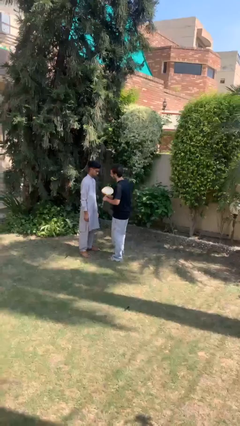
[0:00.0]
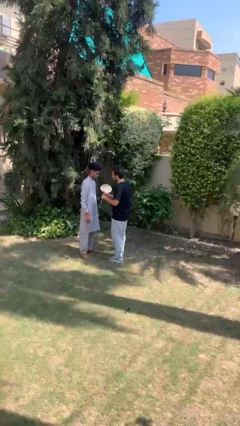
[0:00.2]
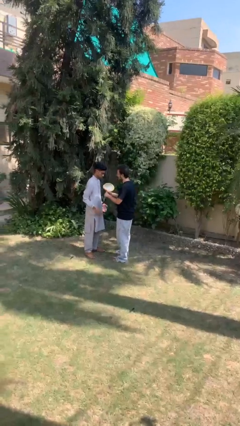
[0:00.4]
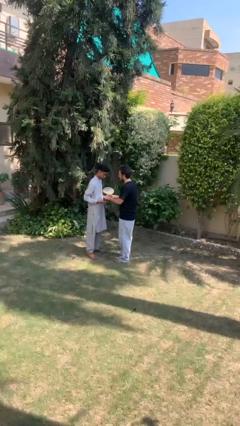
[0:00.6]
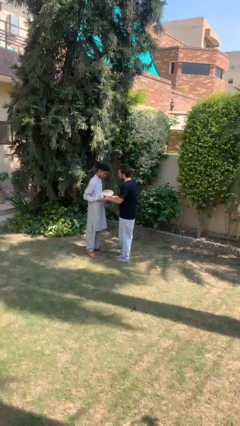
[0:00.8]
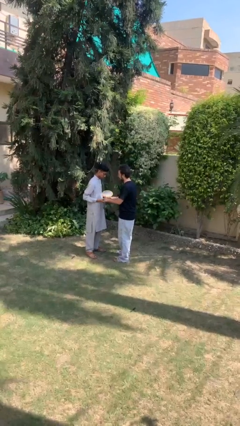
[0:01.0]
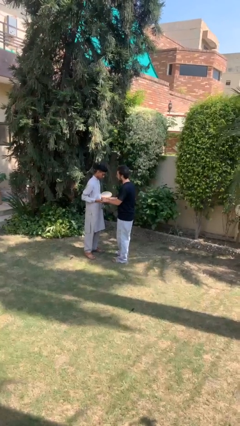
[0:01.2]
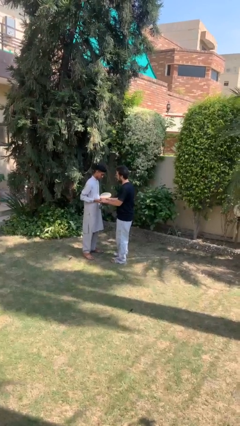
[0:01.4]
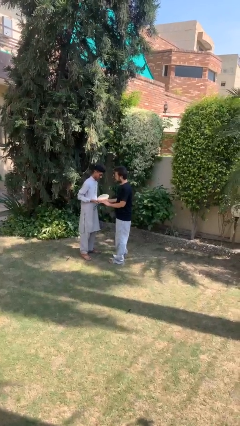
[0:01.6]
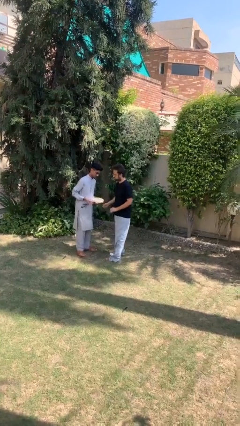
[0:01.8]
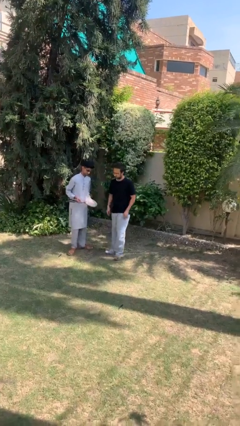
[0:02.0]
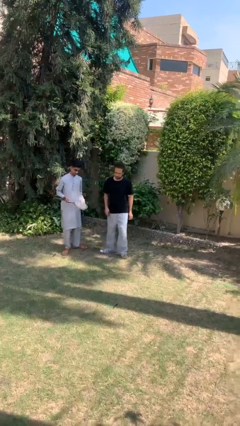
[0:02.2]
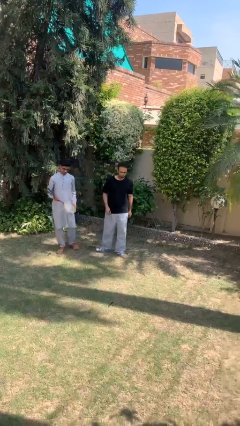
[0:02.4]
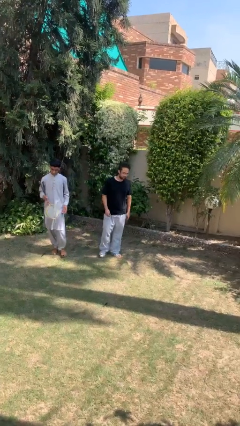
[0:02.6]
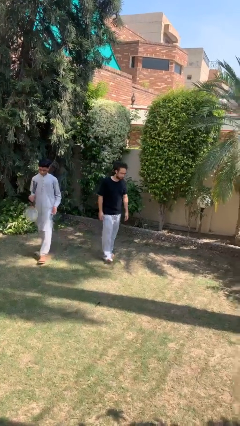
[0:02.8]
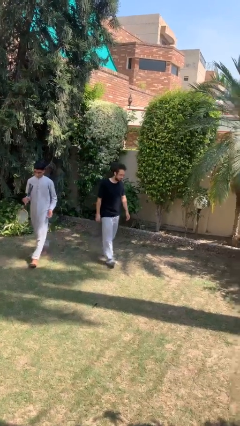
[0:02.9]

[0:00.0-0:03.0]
person transfers object to person

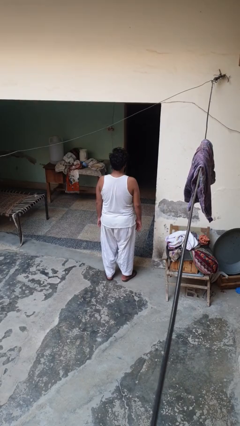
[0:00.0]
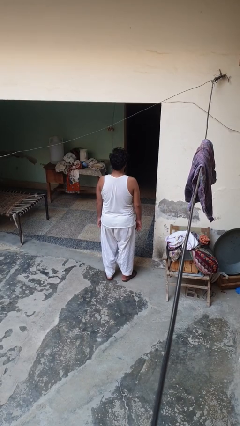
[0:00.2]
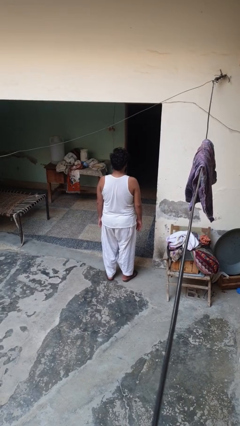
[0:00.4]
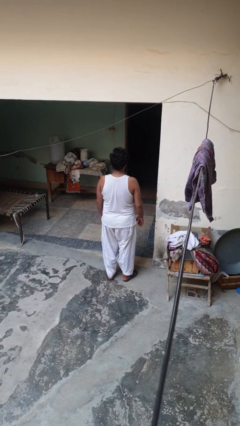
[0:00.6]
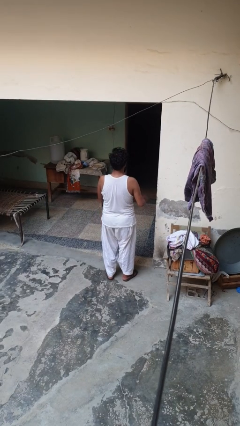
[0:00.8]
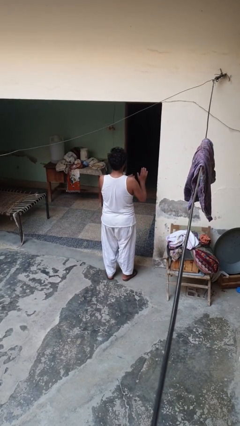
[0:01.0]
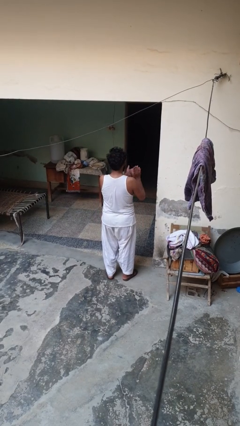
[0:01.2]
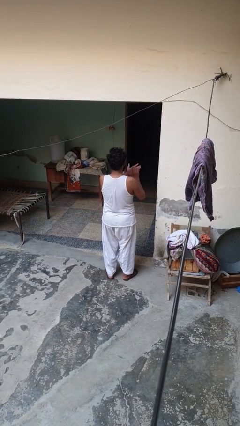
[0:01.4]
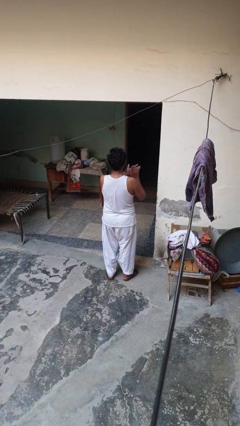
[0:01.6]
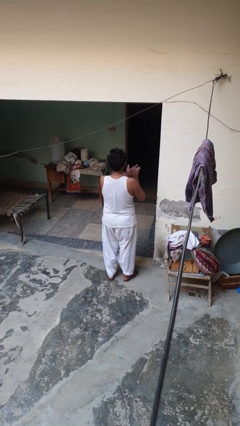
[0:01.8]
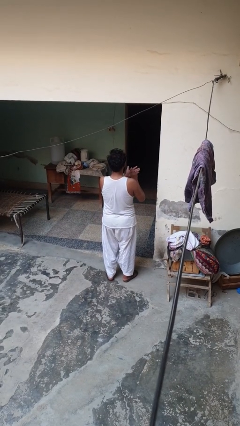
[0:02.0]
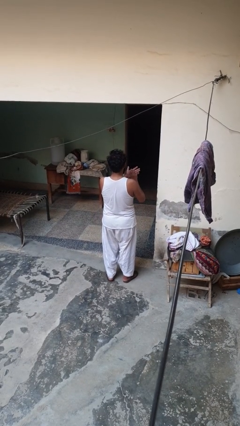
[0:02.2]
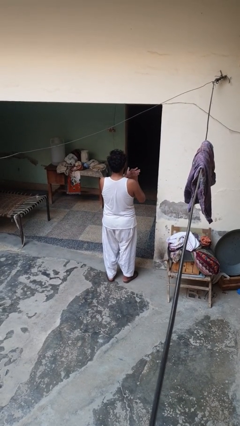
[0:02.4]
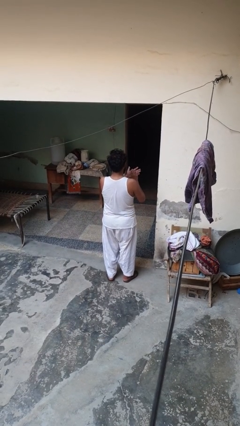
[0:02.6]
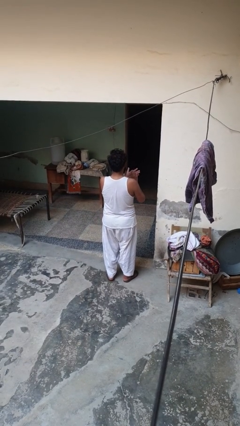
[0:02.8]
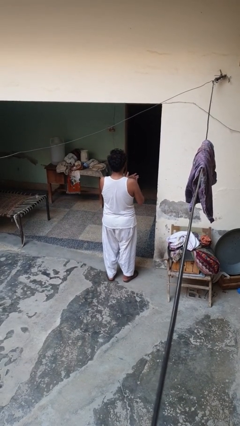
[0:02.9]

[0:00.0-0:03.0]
person claps hands

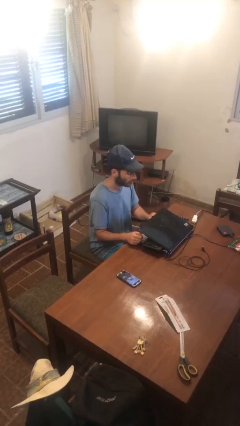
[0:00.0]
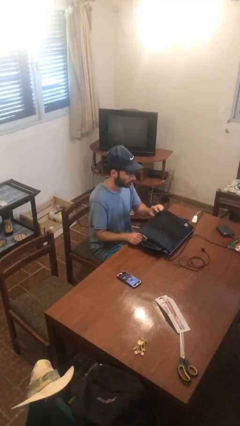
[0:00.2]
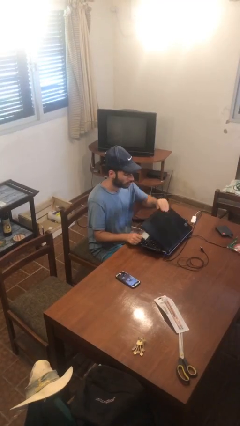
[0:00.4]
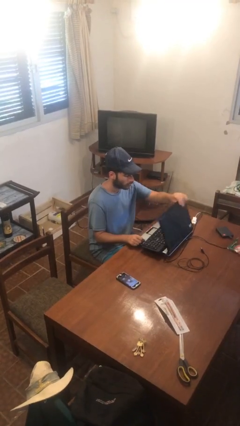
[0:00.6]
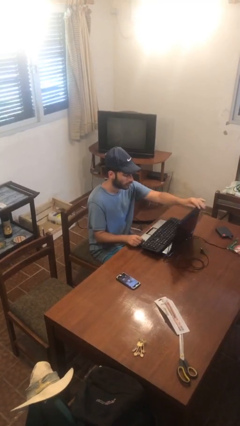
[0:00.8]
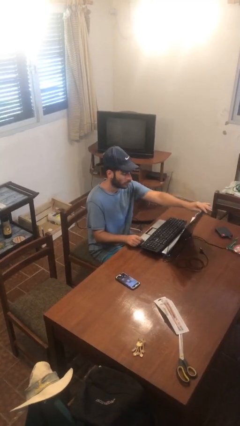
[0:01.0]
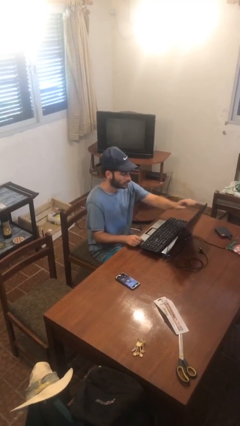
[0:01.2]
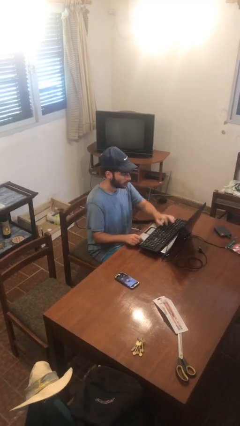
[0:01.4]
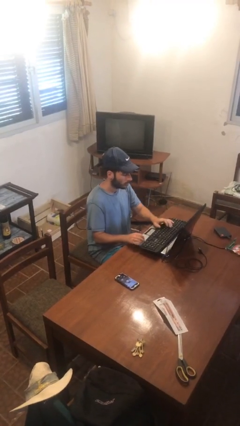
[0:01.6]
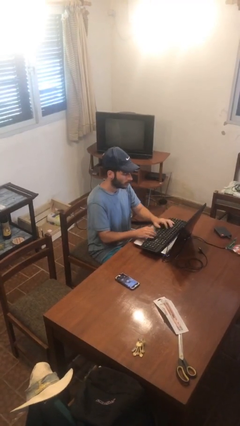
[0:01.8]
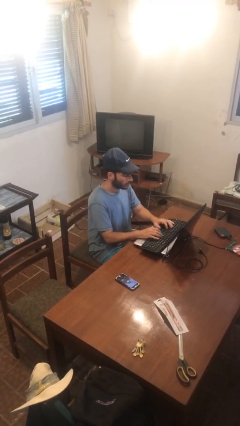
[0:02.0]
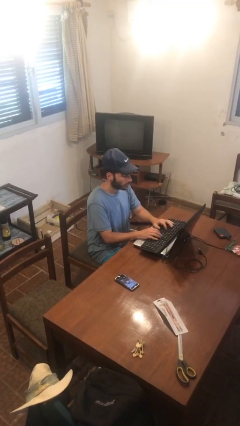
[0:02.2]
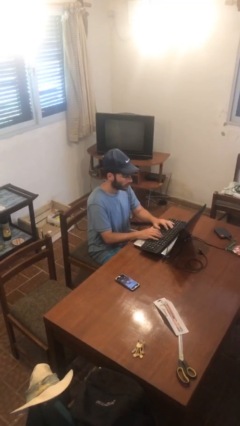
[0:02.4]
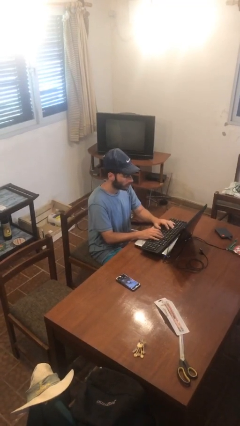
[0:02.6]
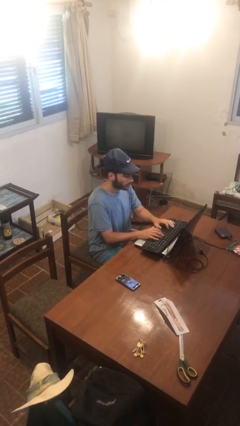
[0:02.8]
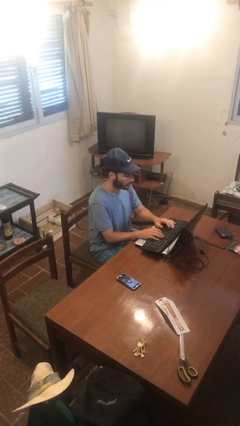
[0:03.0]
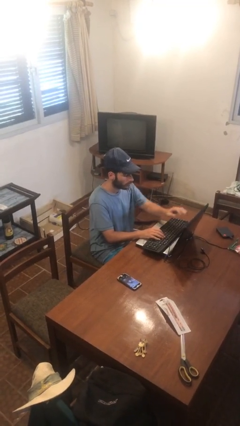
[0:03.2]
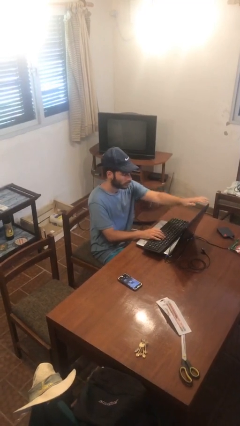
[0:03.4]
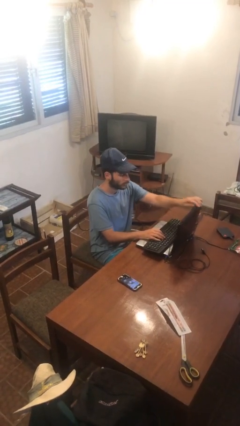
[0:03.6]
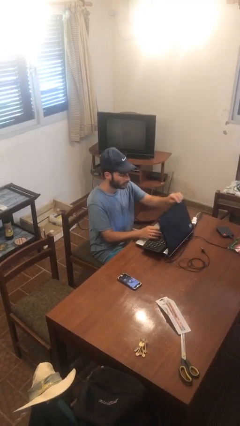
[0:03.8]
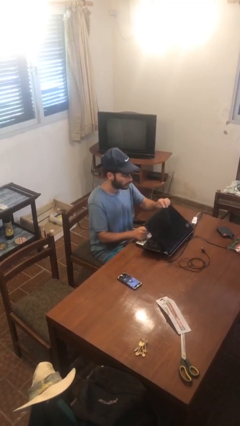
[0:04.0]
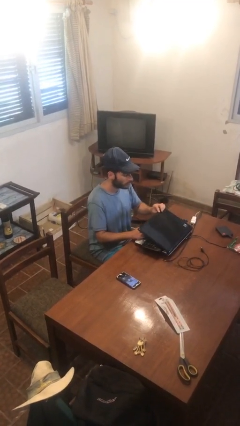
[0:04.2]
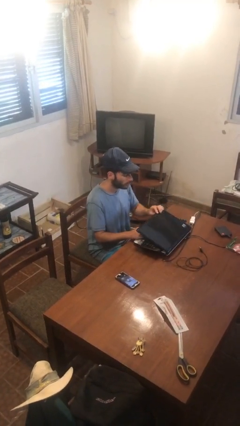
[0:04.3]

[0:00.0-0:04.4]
person interacts with laptop

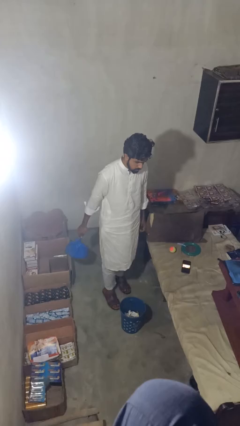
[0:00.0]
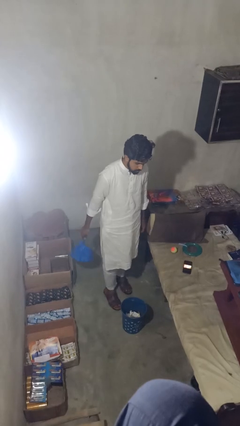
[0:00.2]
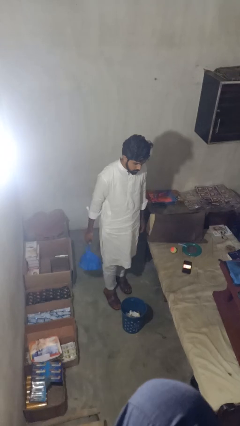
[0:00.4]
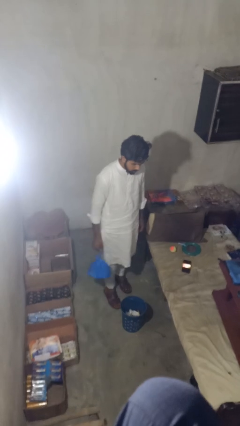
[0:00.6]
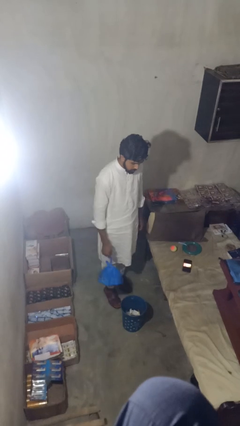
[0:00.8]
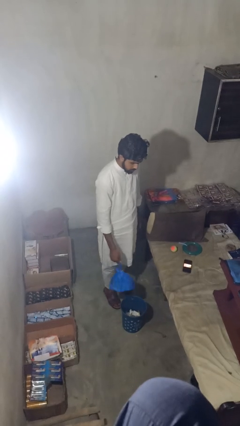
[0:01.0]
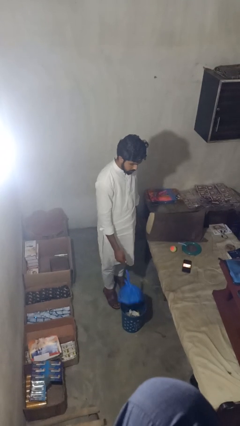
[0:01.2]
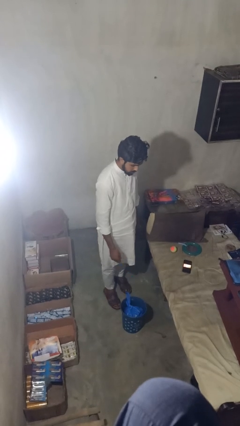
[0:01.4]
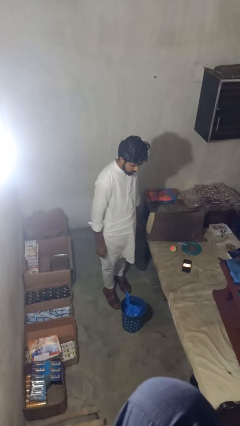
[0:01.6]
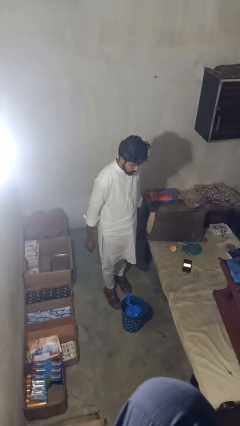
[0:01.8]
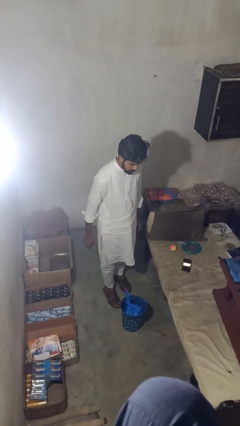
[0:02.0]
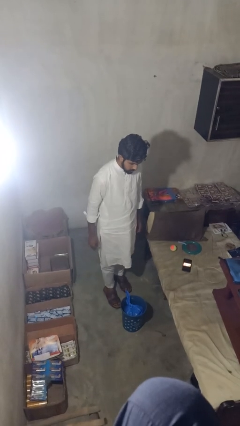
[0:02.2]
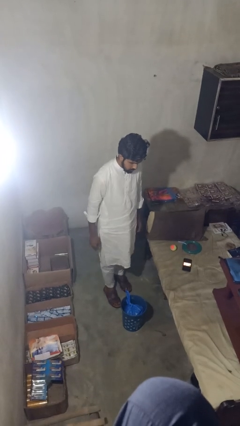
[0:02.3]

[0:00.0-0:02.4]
person puts object into basket

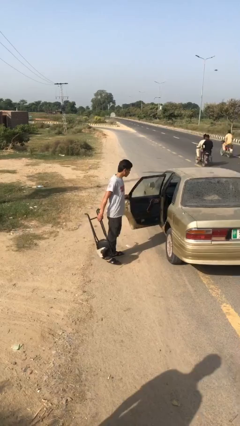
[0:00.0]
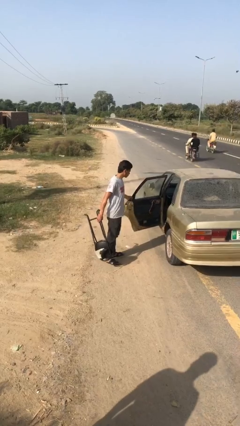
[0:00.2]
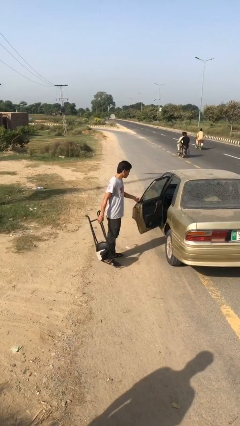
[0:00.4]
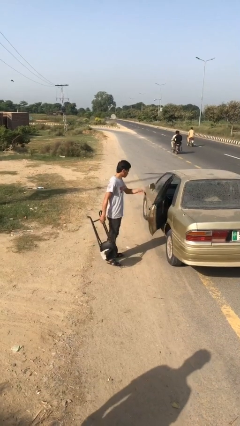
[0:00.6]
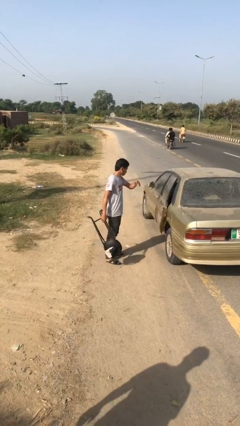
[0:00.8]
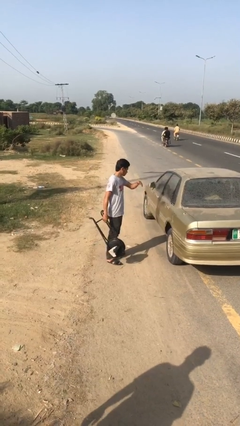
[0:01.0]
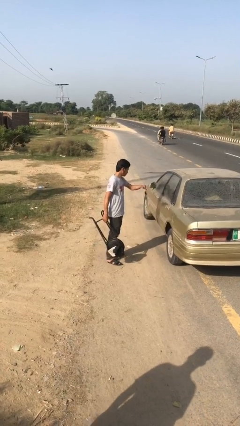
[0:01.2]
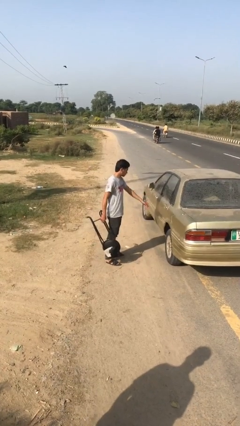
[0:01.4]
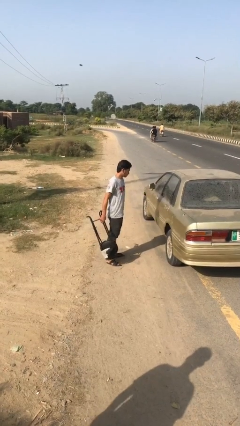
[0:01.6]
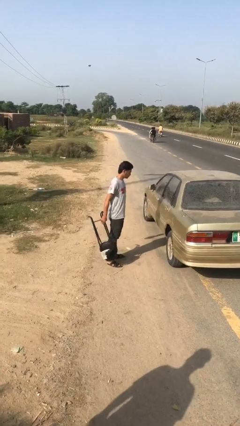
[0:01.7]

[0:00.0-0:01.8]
person closes car door

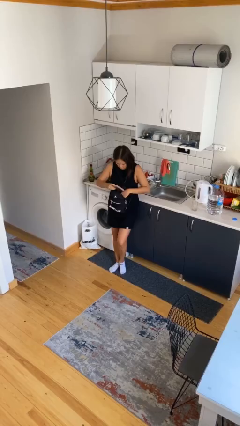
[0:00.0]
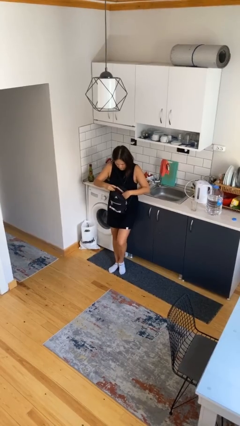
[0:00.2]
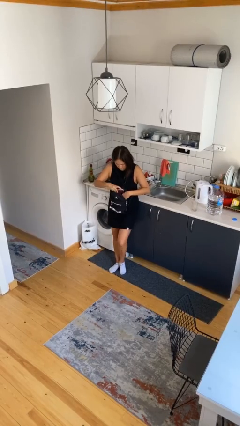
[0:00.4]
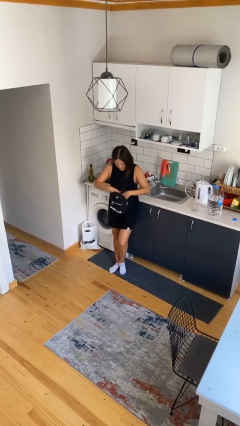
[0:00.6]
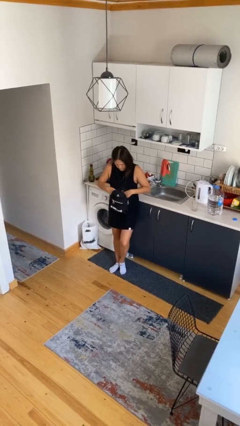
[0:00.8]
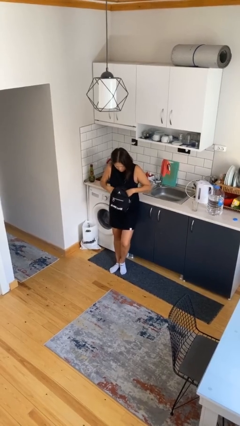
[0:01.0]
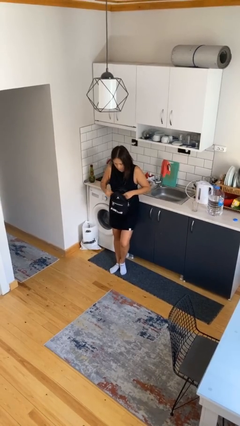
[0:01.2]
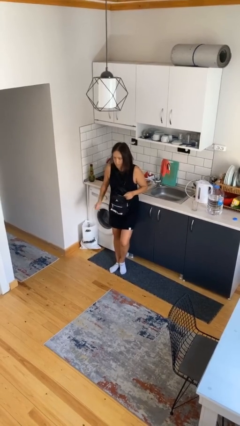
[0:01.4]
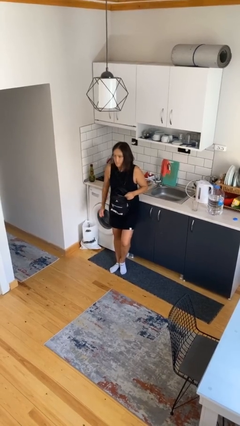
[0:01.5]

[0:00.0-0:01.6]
person puts object into backpack

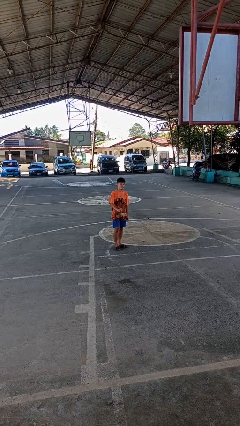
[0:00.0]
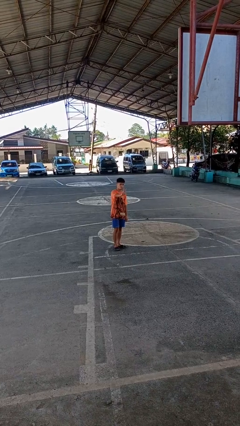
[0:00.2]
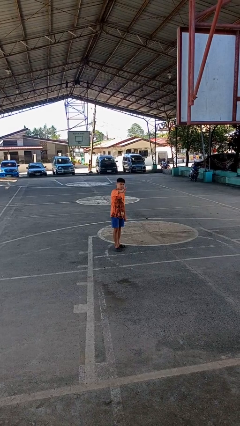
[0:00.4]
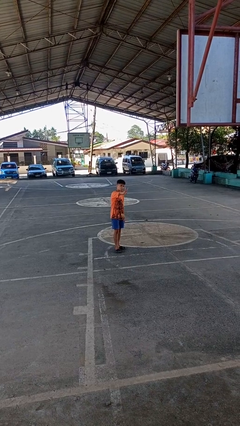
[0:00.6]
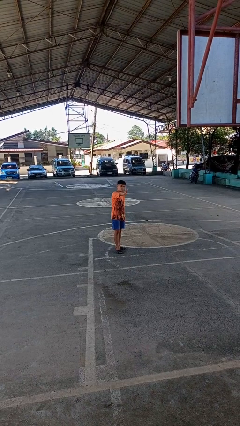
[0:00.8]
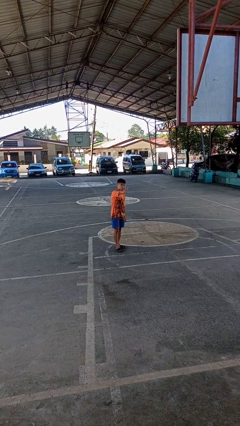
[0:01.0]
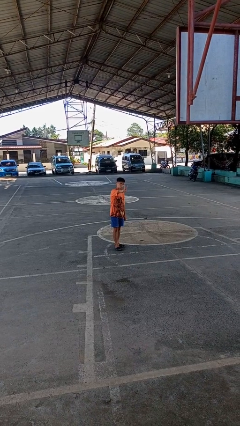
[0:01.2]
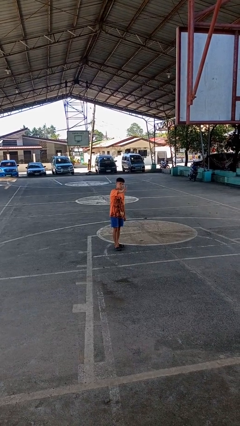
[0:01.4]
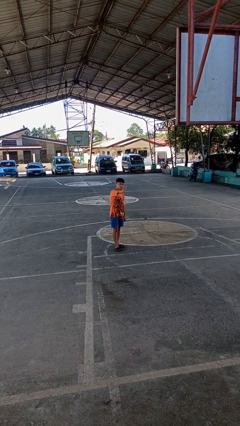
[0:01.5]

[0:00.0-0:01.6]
person gestures peace
